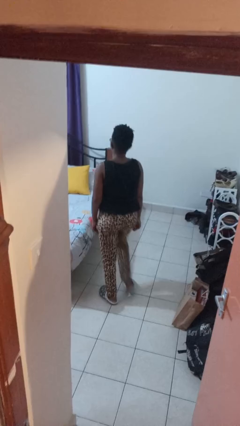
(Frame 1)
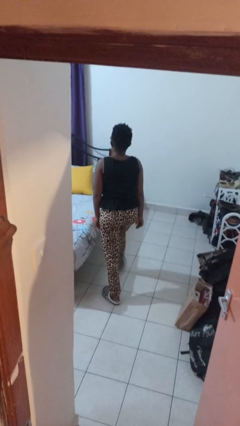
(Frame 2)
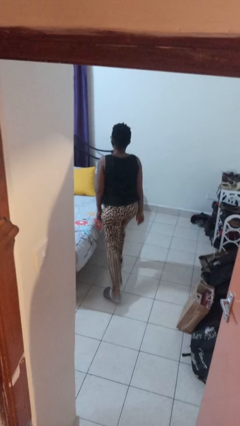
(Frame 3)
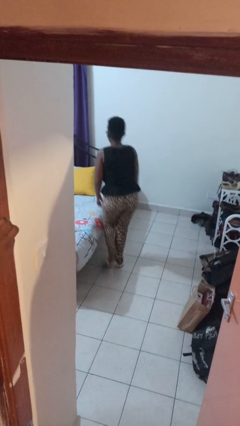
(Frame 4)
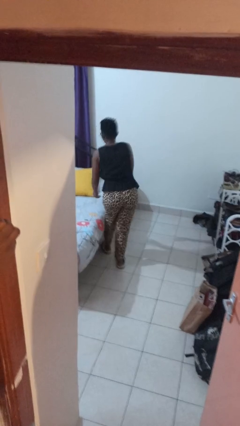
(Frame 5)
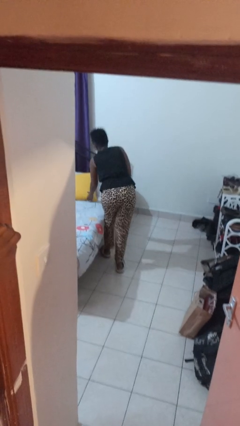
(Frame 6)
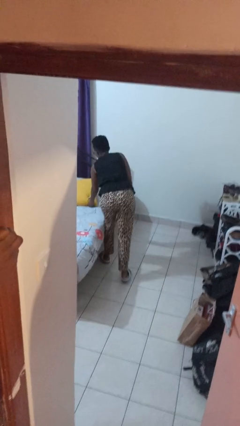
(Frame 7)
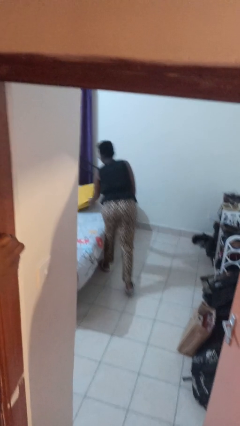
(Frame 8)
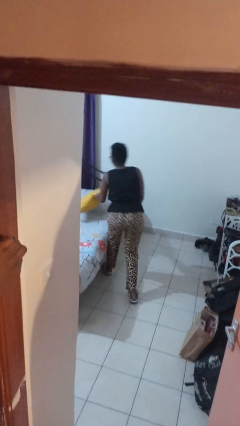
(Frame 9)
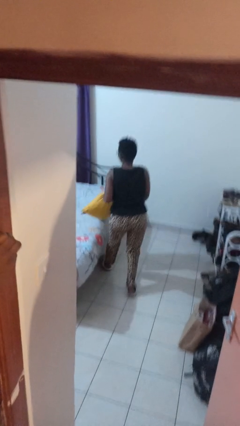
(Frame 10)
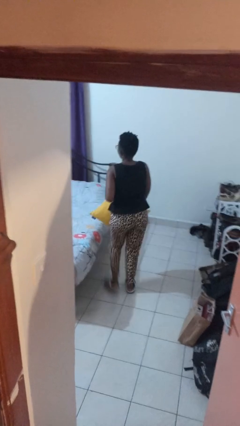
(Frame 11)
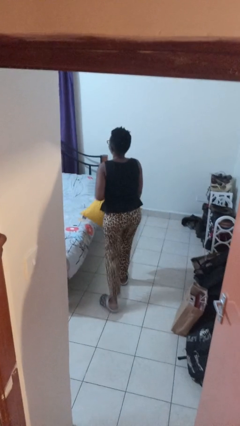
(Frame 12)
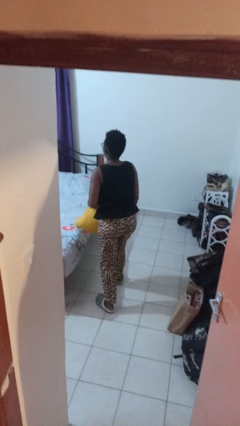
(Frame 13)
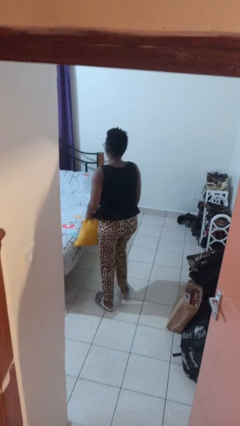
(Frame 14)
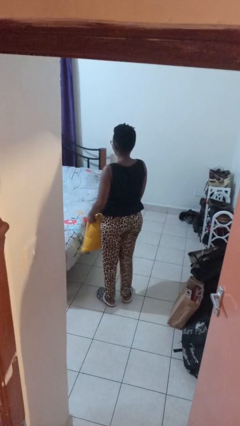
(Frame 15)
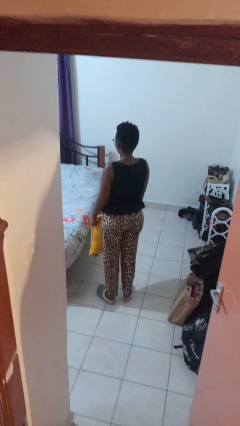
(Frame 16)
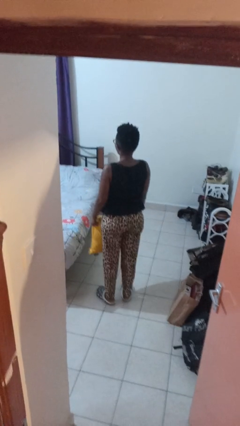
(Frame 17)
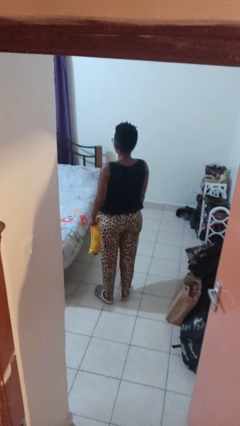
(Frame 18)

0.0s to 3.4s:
person picks up object from bed

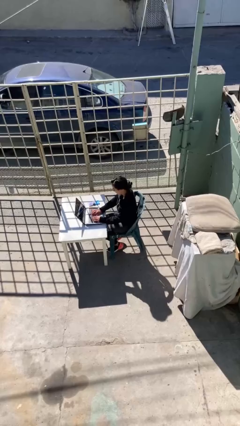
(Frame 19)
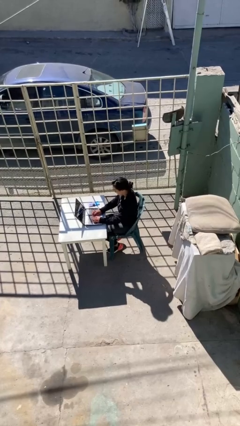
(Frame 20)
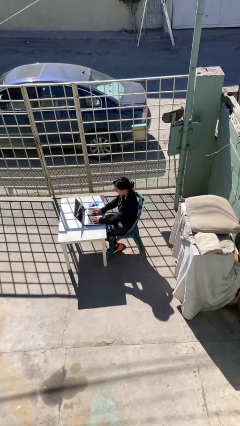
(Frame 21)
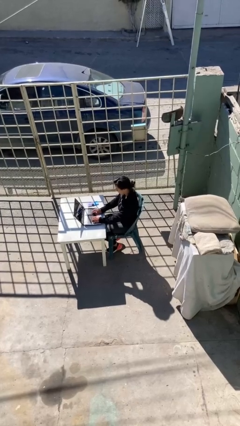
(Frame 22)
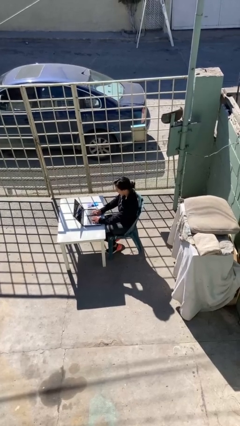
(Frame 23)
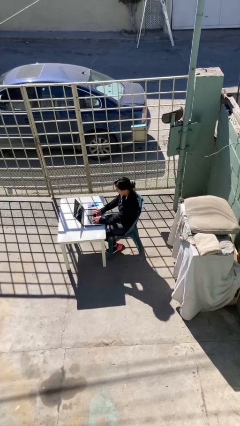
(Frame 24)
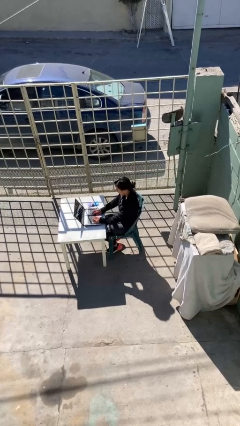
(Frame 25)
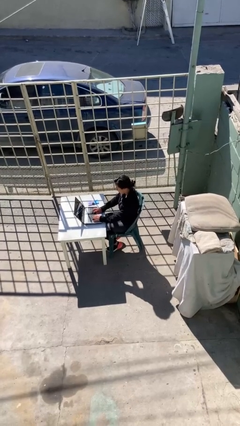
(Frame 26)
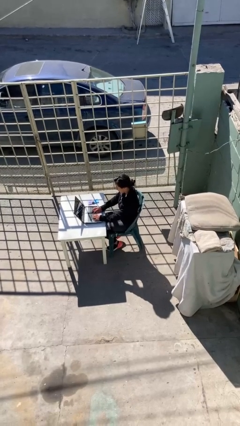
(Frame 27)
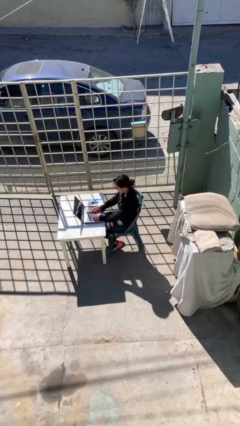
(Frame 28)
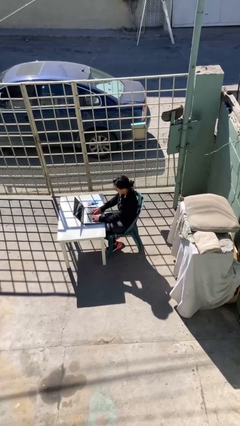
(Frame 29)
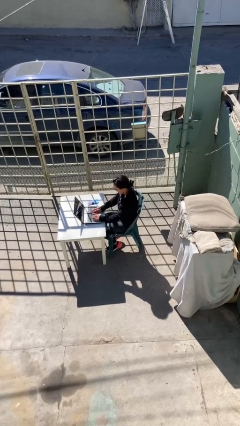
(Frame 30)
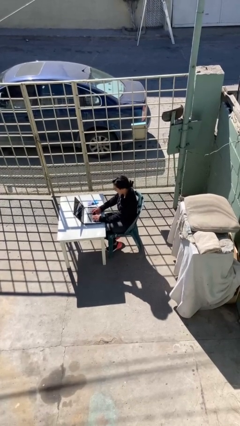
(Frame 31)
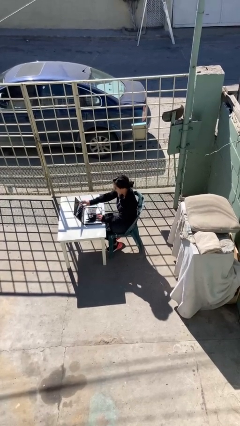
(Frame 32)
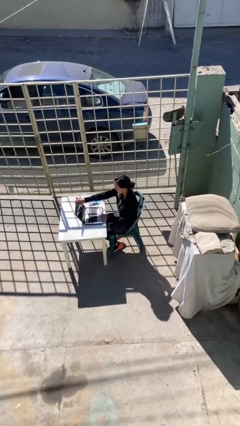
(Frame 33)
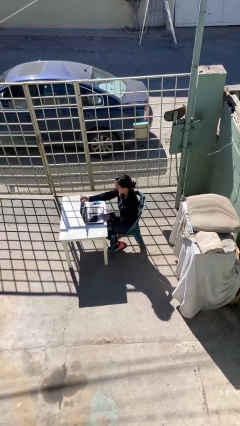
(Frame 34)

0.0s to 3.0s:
person interacts with laptop

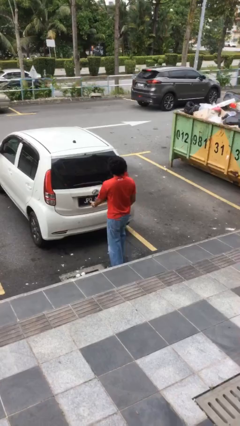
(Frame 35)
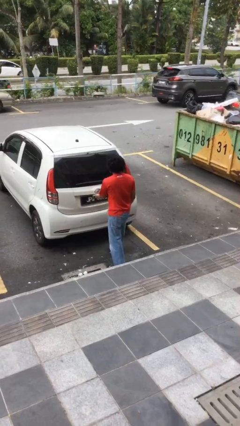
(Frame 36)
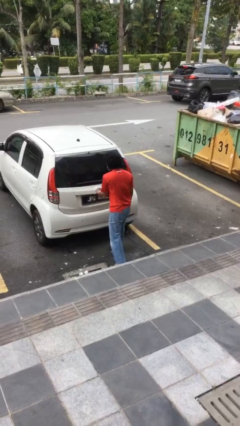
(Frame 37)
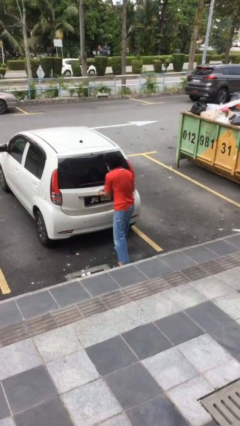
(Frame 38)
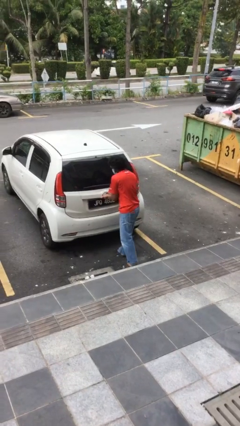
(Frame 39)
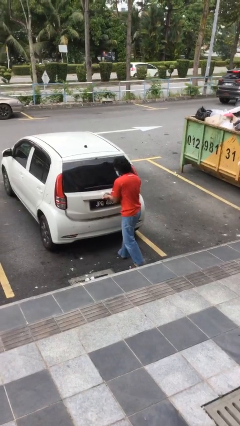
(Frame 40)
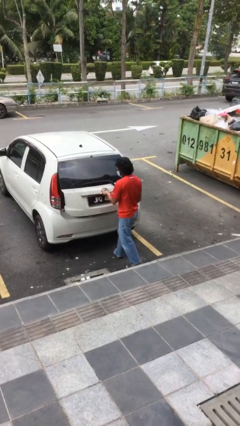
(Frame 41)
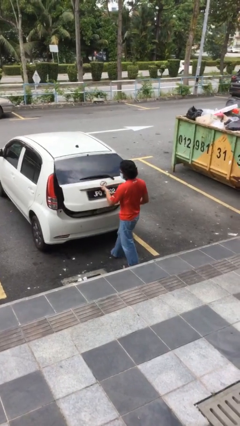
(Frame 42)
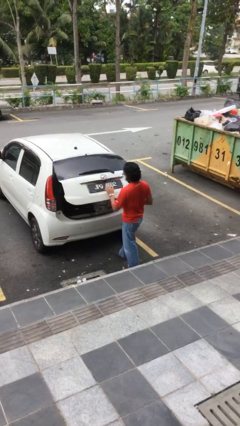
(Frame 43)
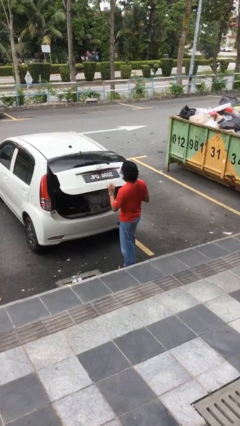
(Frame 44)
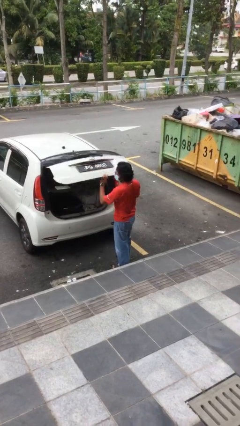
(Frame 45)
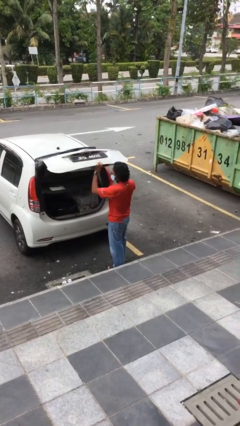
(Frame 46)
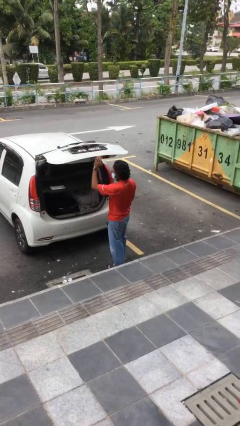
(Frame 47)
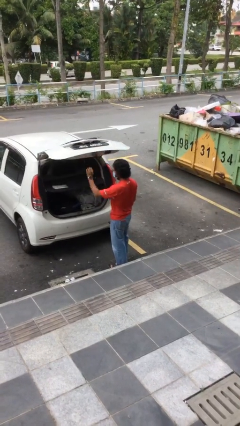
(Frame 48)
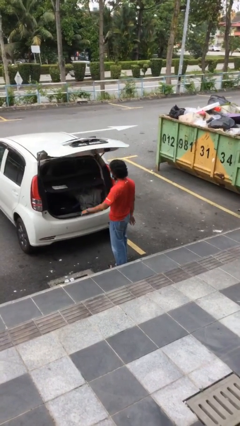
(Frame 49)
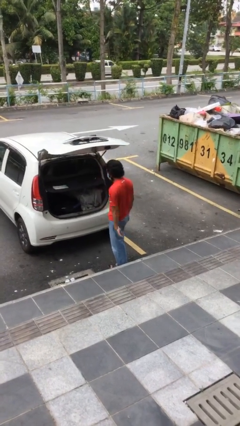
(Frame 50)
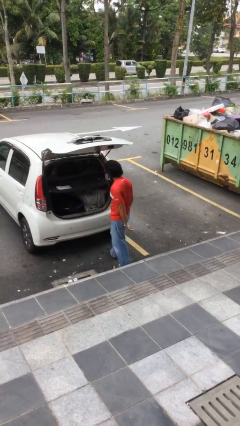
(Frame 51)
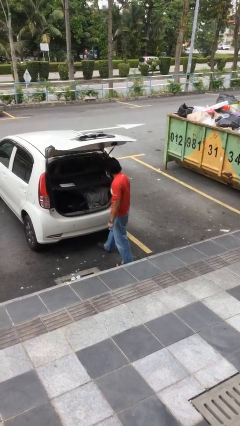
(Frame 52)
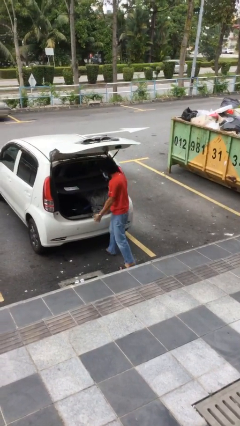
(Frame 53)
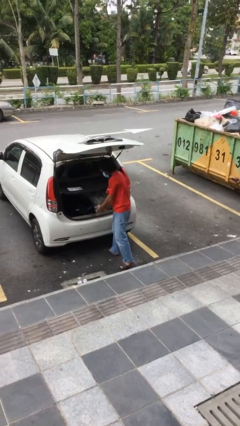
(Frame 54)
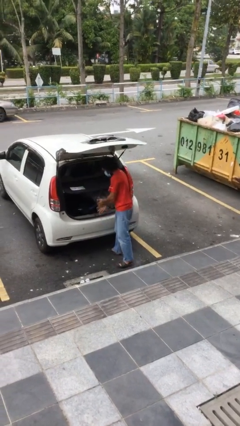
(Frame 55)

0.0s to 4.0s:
person opens car trunk

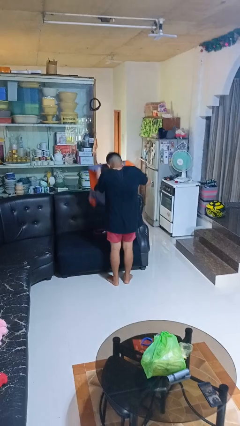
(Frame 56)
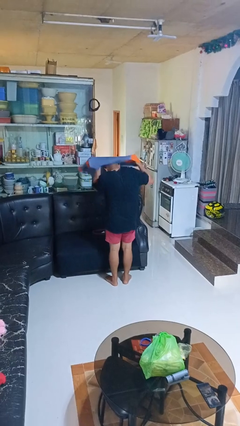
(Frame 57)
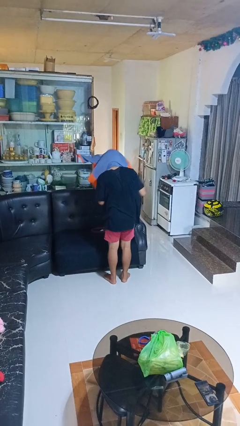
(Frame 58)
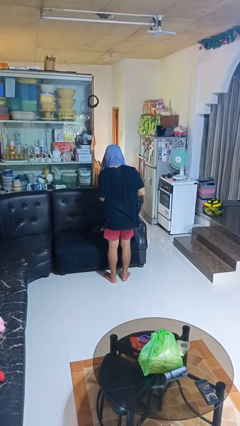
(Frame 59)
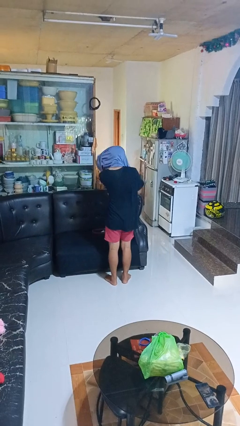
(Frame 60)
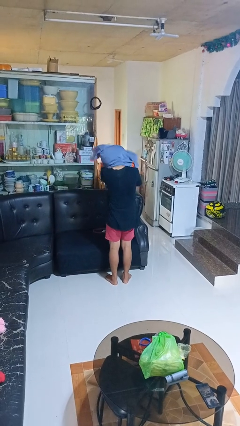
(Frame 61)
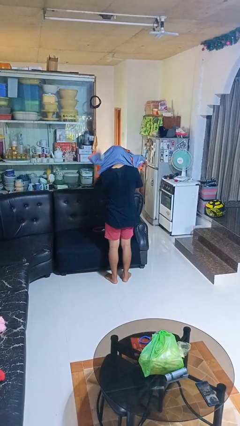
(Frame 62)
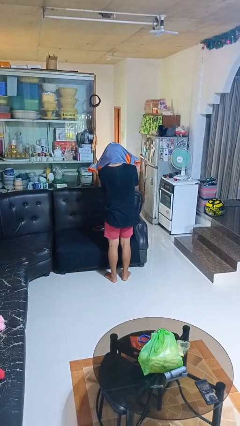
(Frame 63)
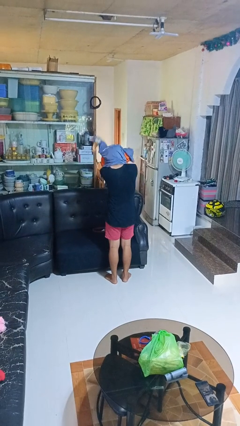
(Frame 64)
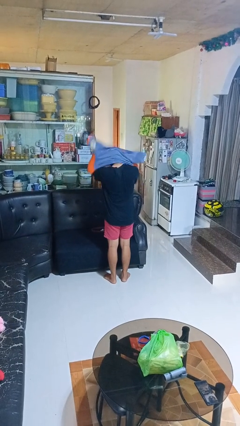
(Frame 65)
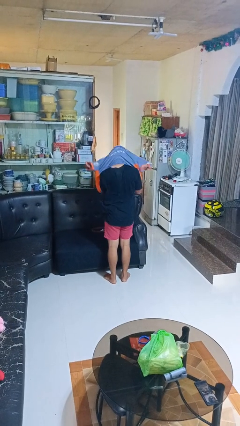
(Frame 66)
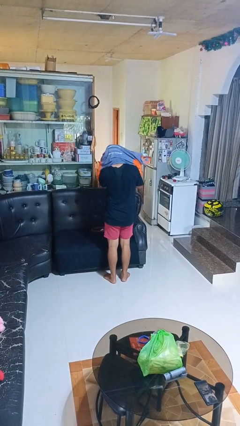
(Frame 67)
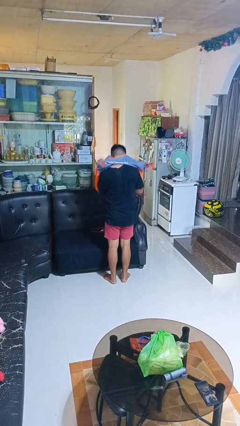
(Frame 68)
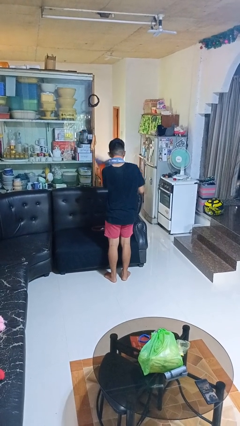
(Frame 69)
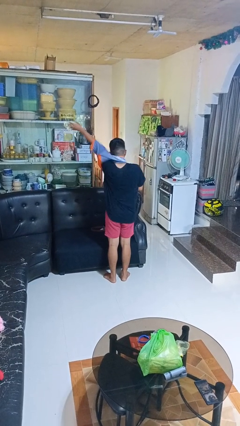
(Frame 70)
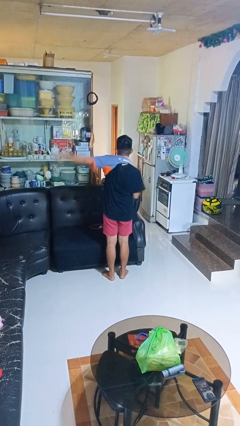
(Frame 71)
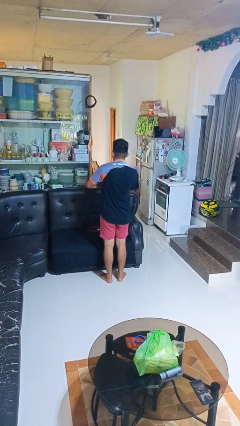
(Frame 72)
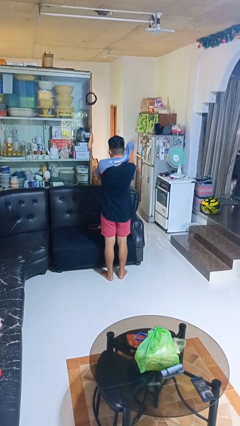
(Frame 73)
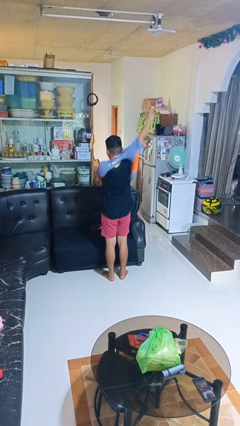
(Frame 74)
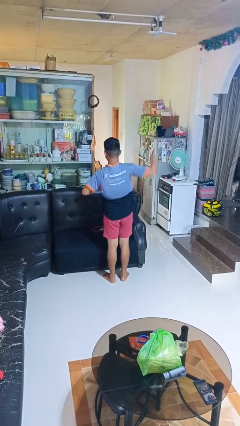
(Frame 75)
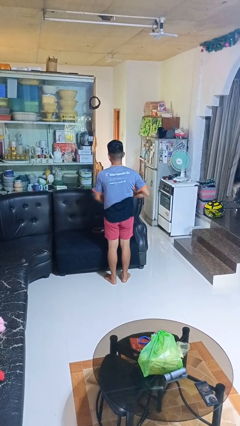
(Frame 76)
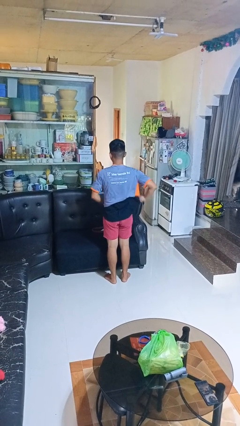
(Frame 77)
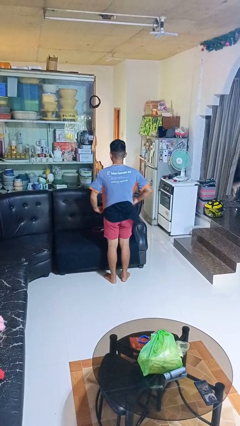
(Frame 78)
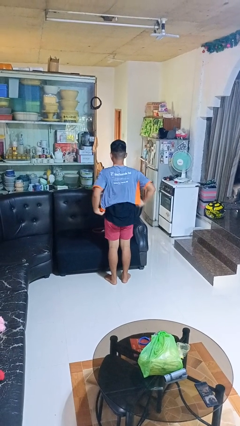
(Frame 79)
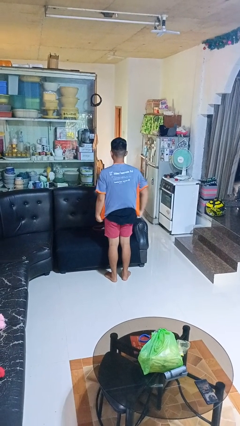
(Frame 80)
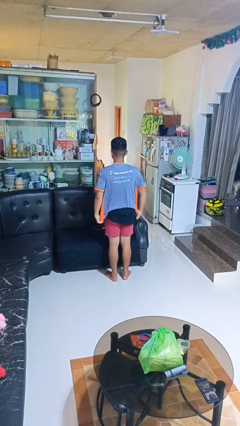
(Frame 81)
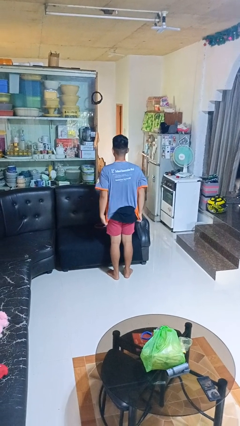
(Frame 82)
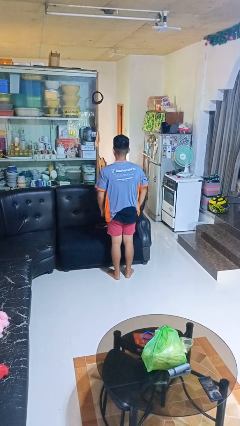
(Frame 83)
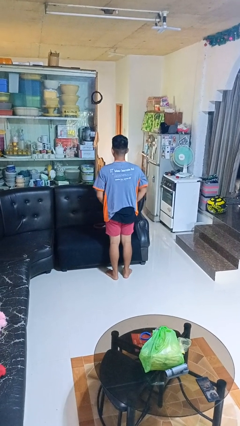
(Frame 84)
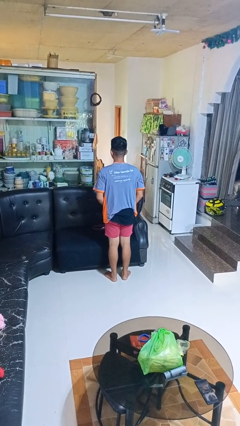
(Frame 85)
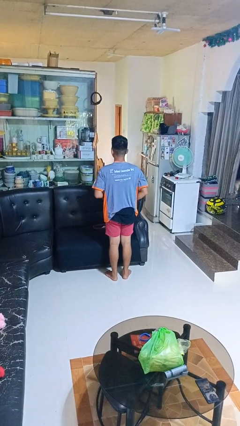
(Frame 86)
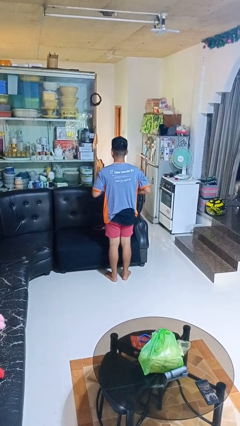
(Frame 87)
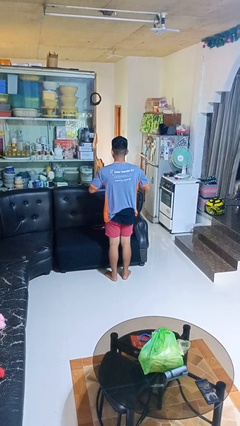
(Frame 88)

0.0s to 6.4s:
person puts on shirt

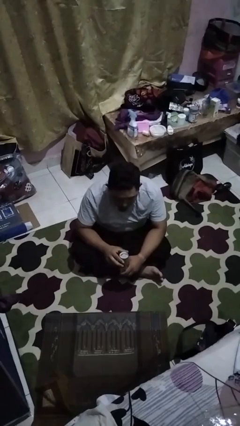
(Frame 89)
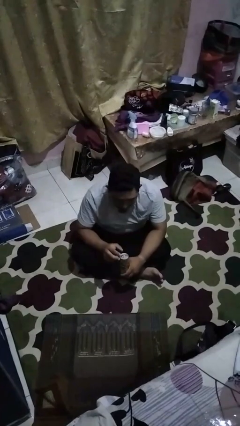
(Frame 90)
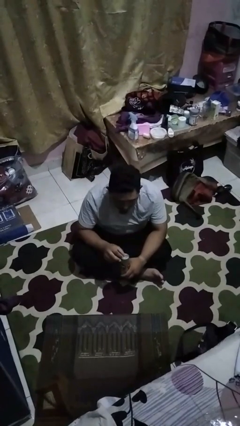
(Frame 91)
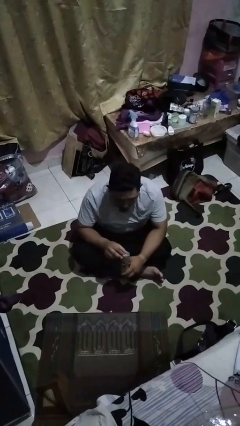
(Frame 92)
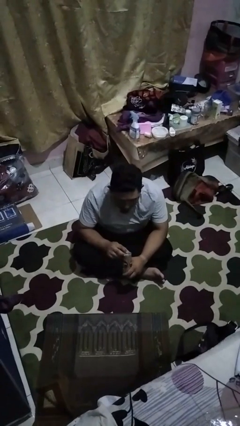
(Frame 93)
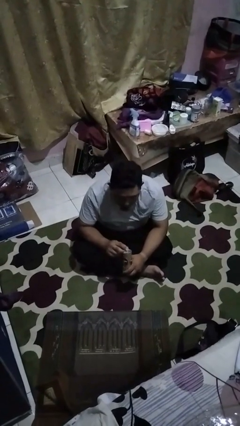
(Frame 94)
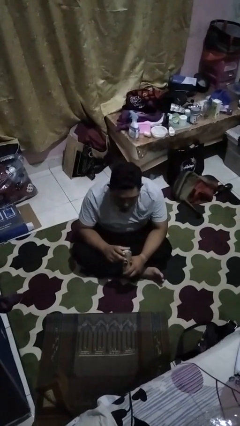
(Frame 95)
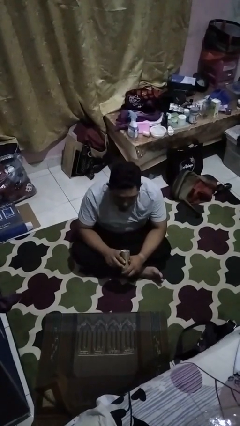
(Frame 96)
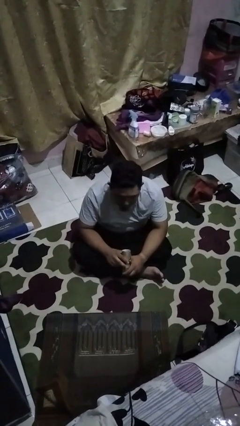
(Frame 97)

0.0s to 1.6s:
person opens beverage can
